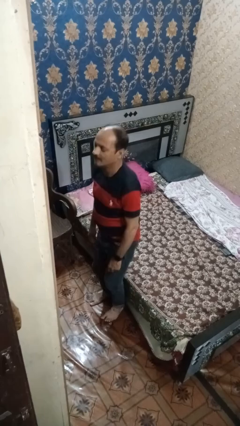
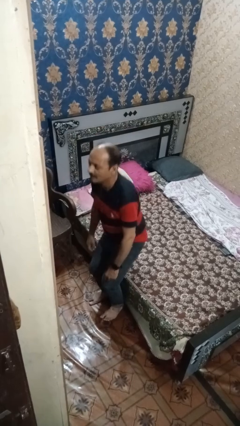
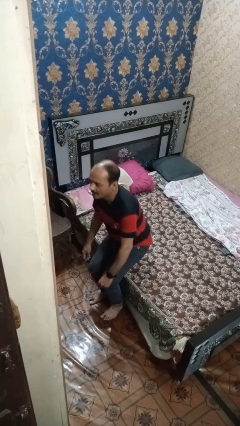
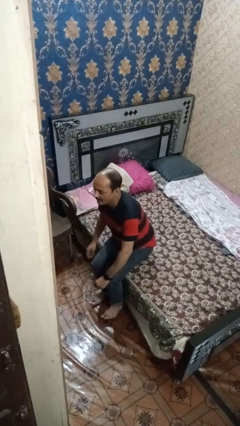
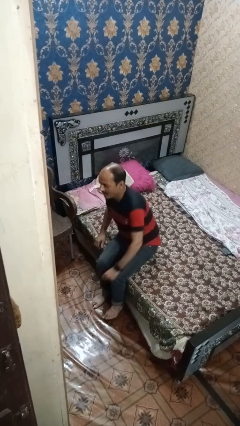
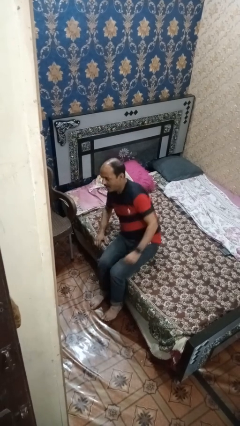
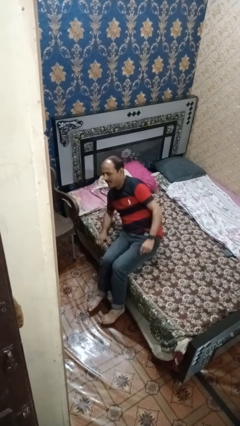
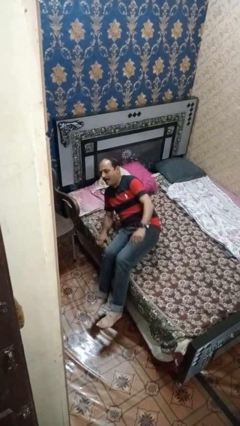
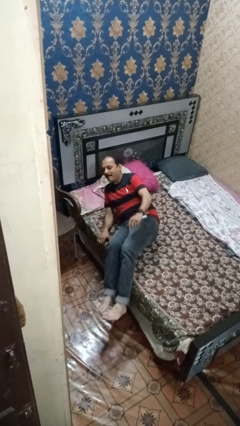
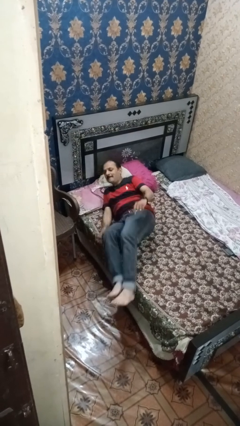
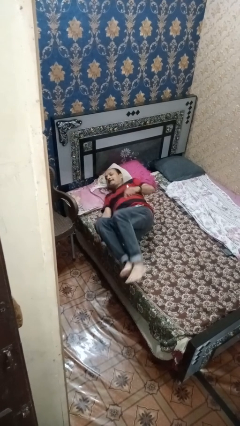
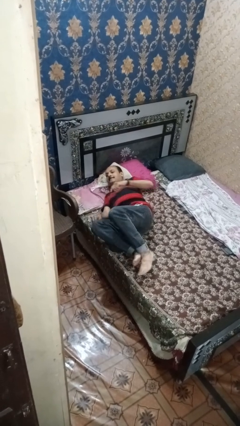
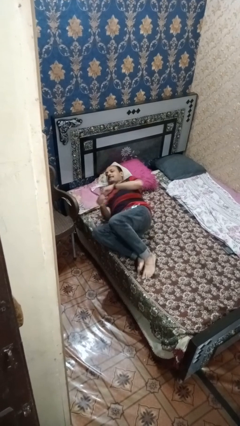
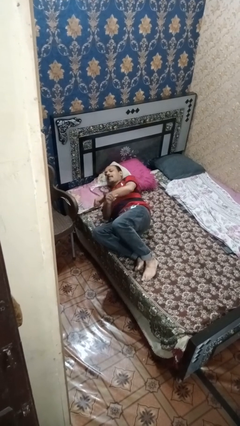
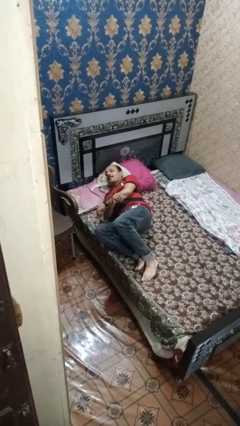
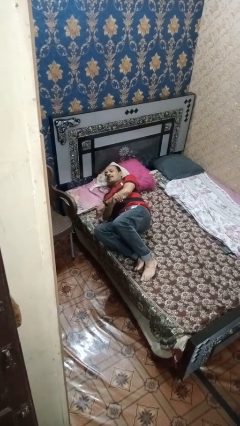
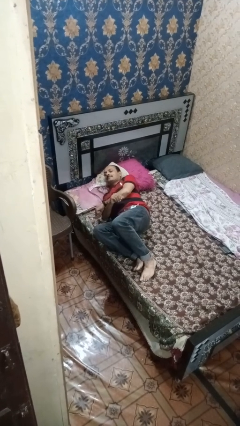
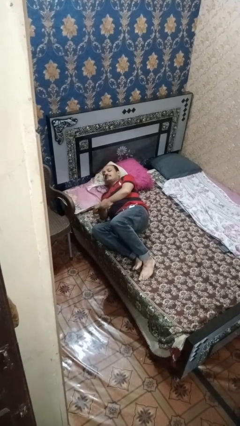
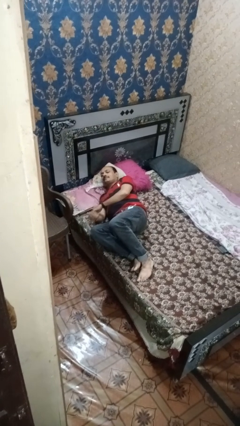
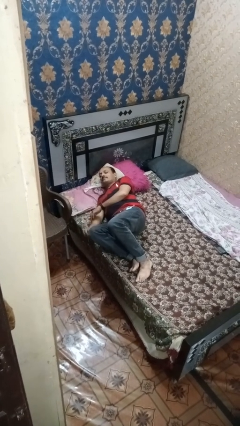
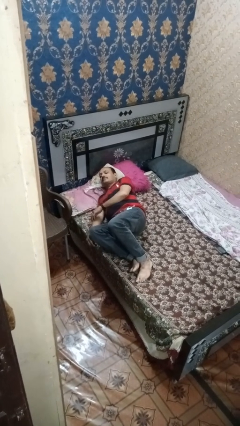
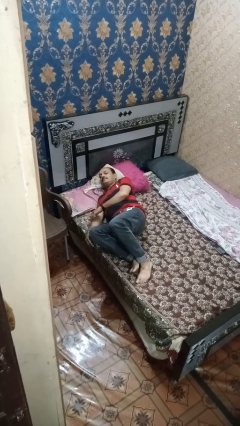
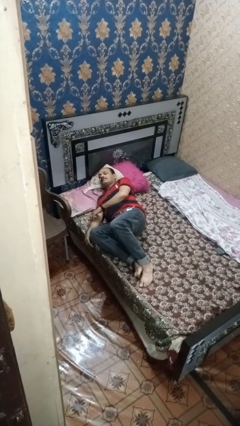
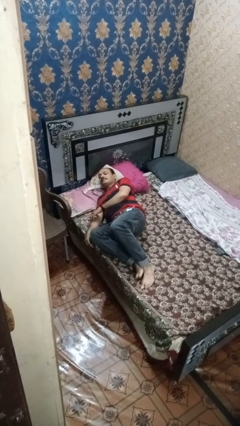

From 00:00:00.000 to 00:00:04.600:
person lies down on bed

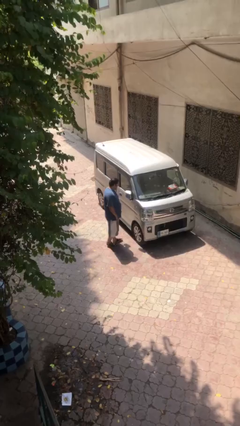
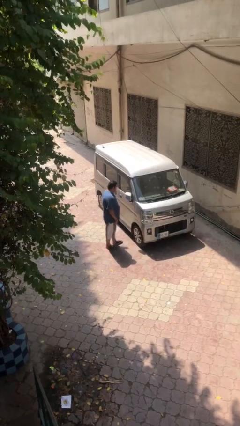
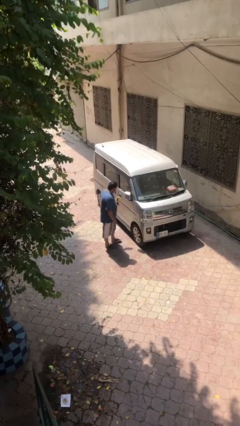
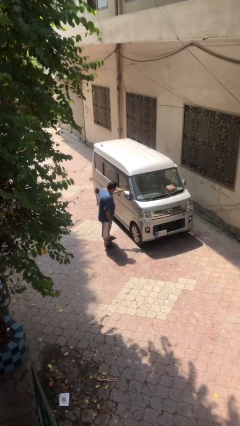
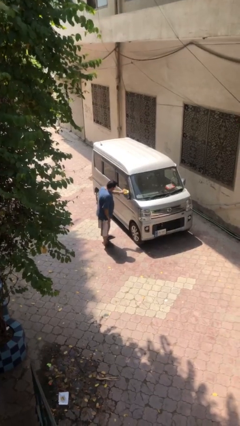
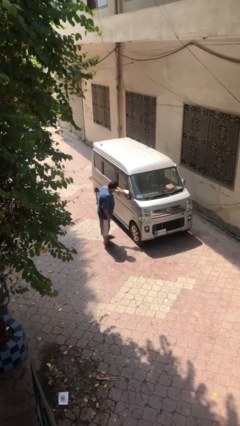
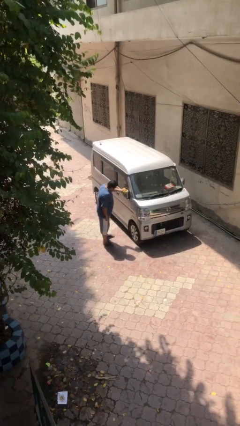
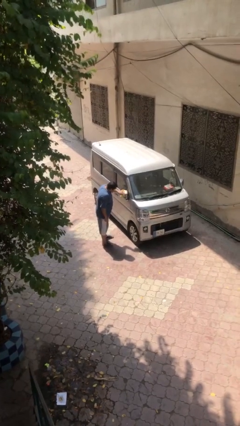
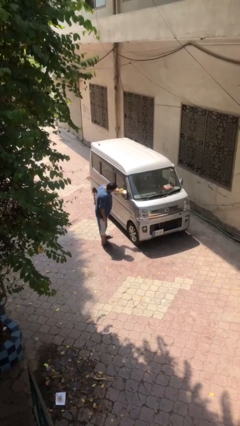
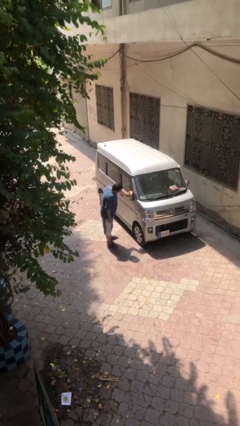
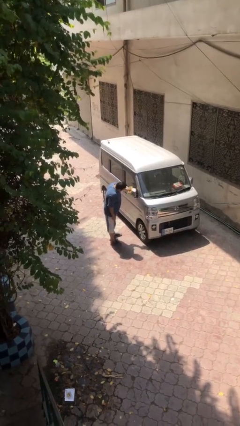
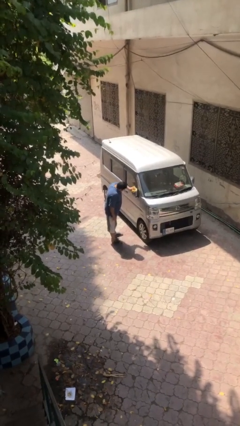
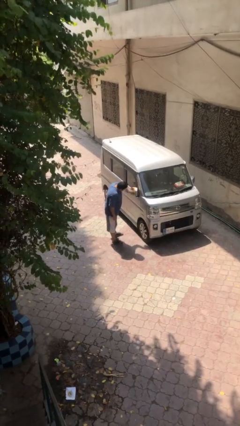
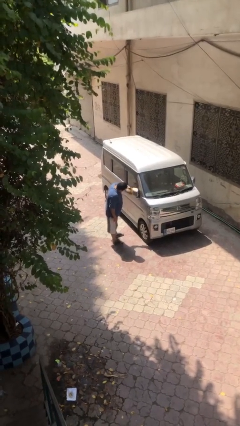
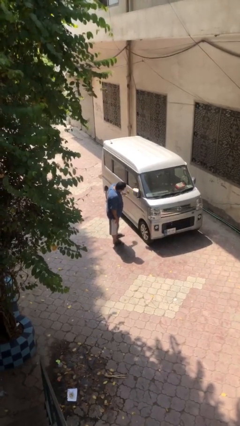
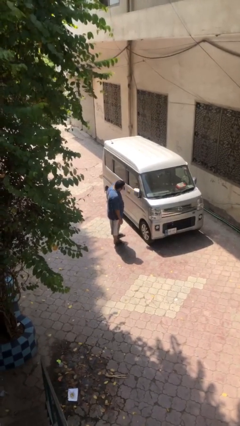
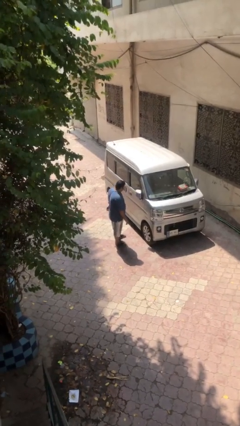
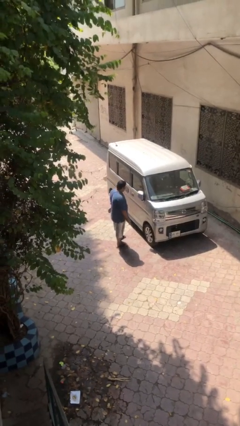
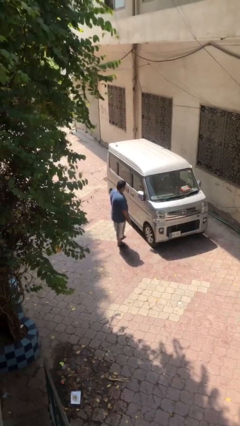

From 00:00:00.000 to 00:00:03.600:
person polishes car with rag

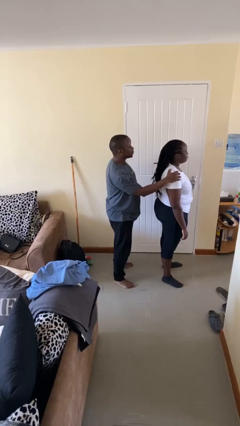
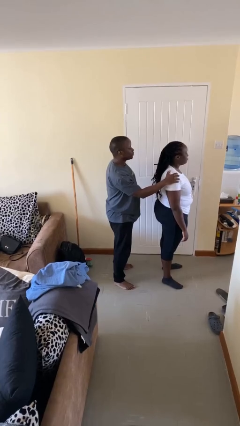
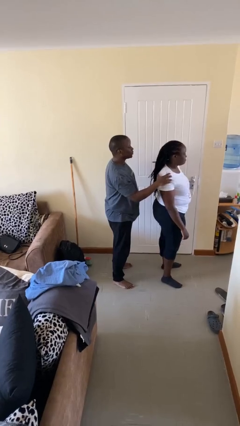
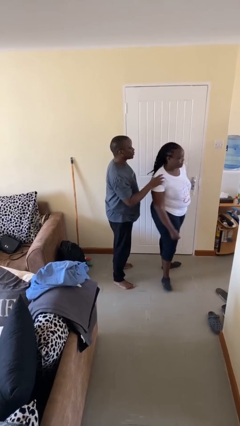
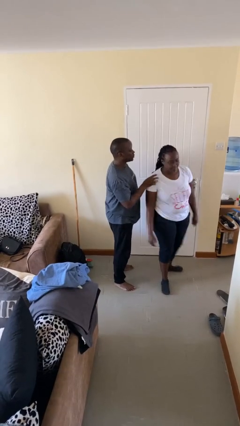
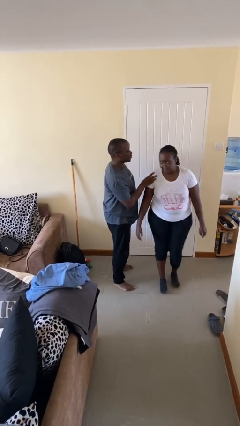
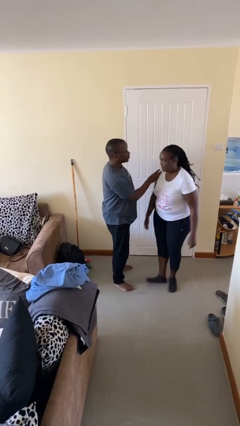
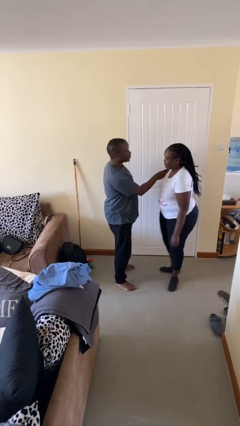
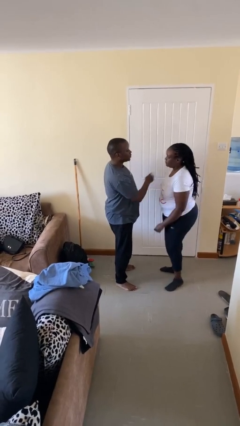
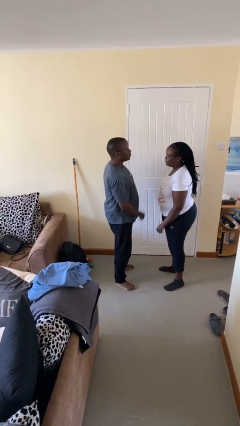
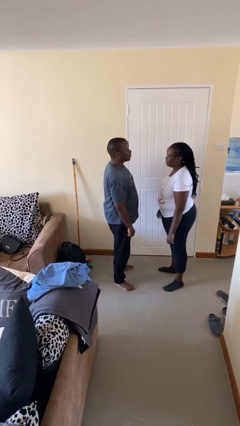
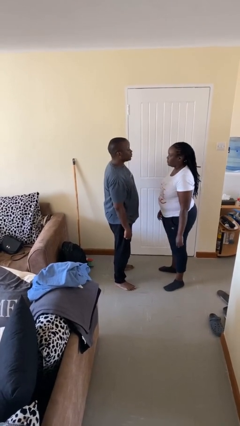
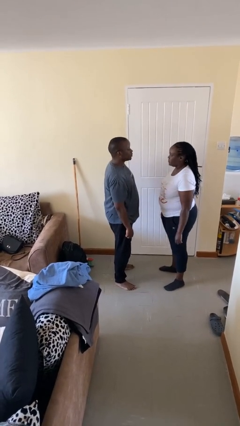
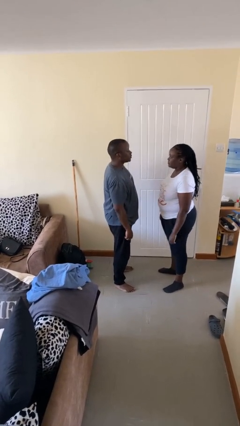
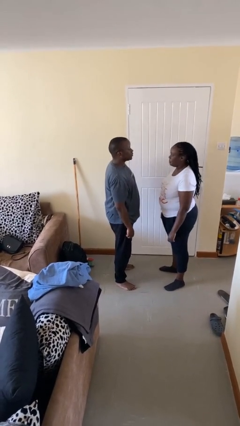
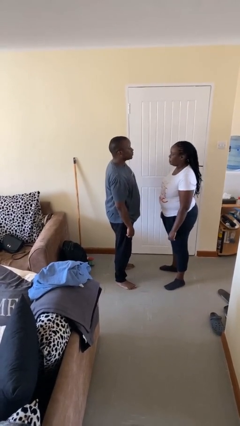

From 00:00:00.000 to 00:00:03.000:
person spins person around

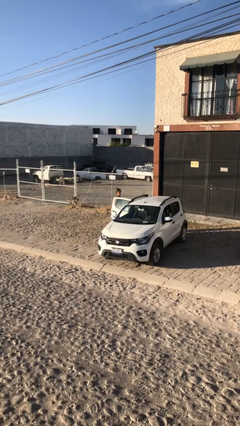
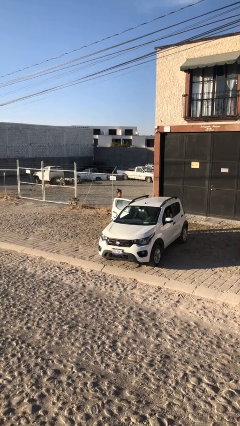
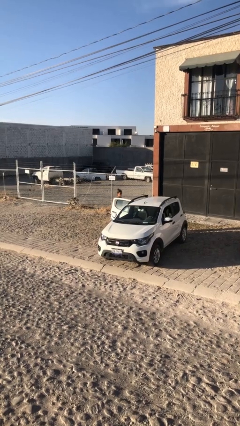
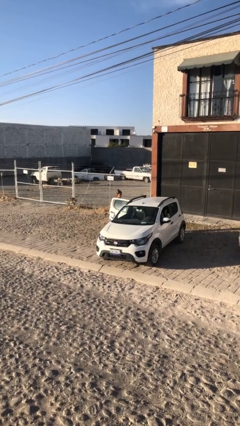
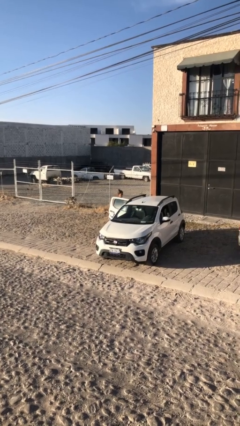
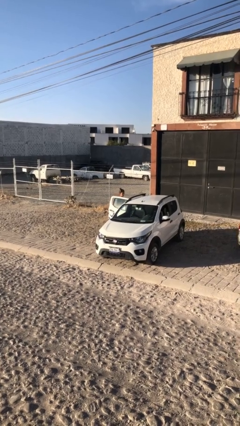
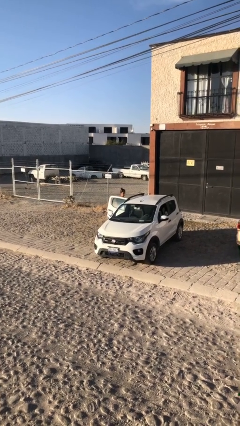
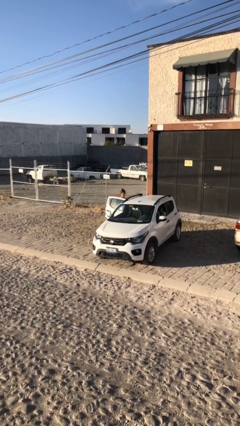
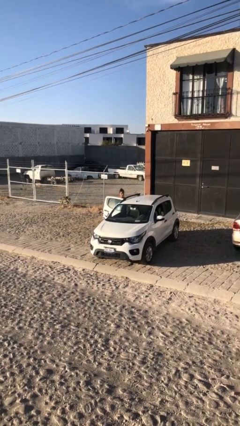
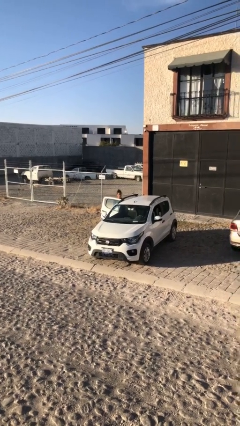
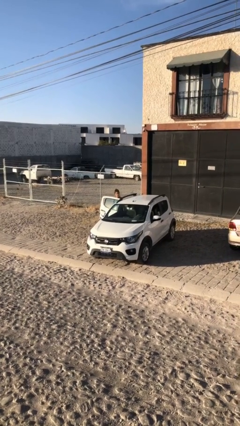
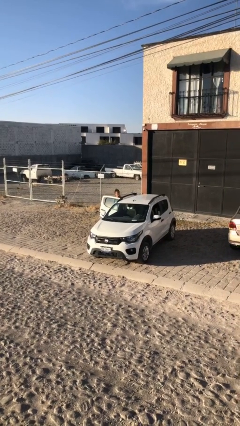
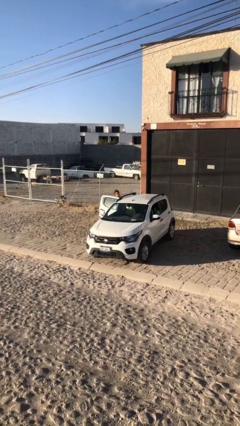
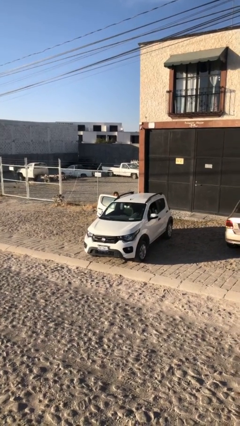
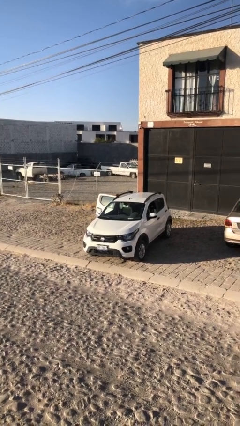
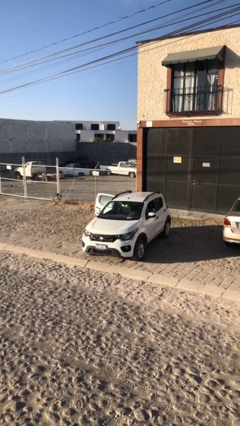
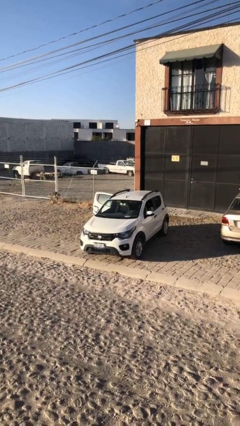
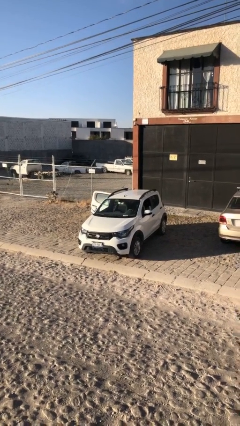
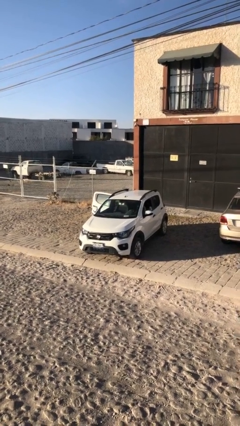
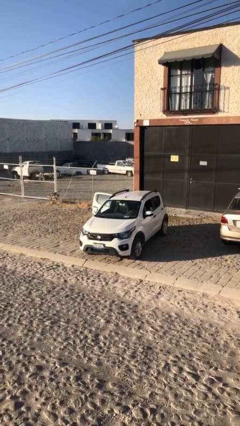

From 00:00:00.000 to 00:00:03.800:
person enters car

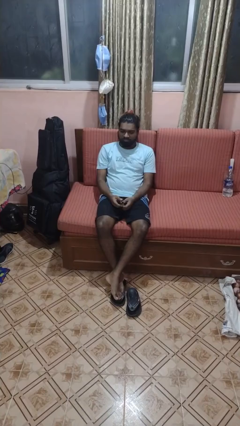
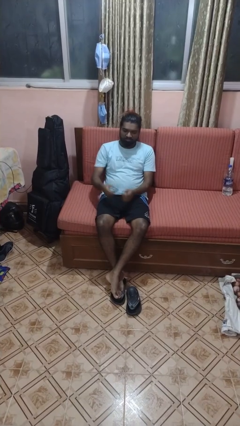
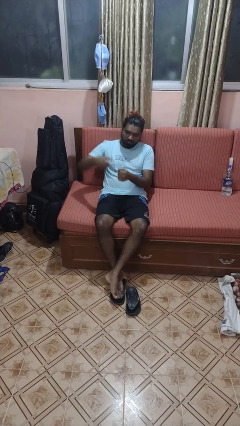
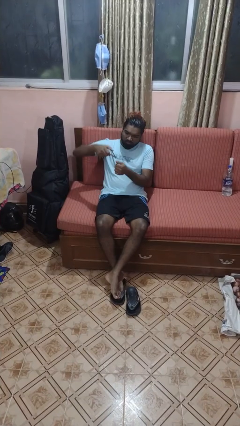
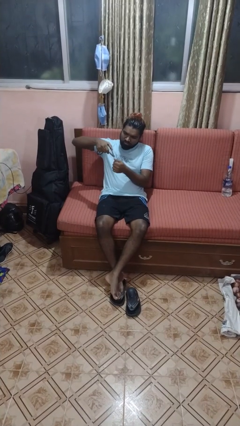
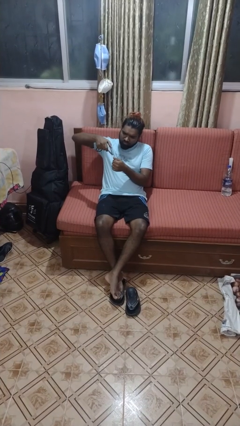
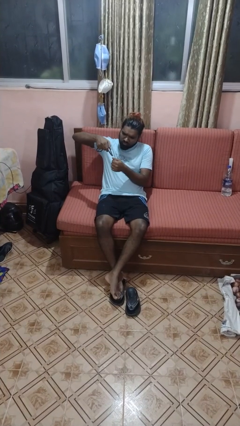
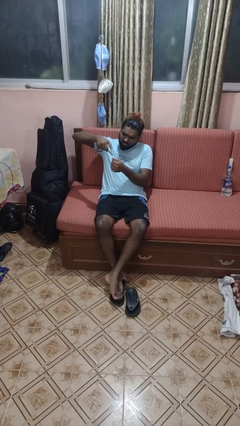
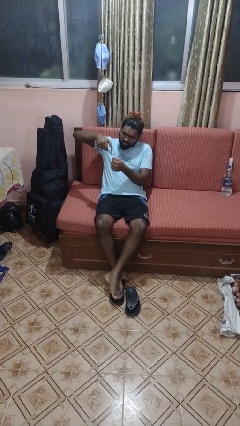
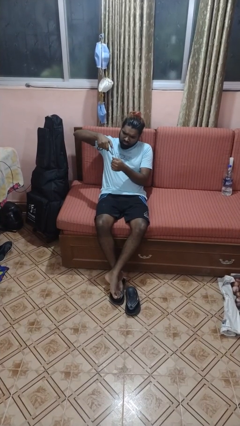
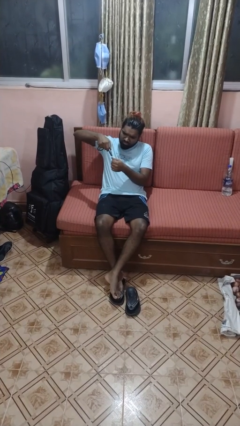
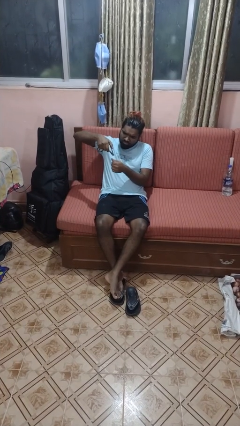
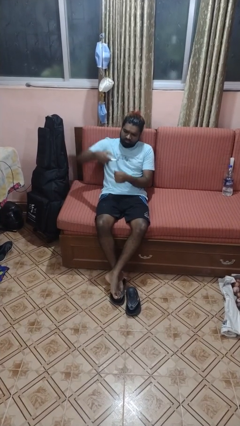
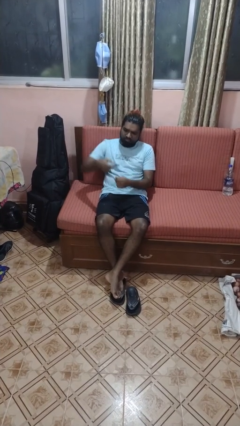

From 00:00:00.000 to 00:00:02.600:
person clips fingernails
